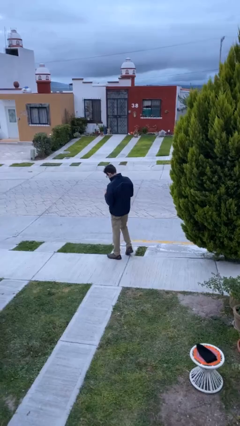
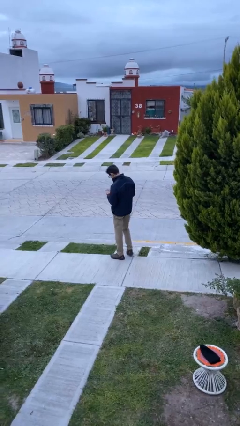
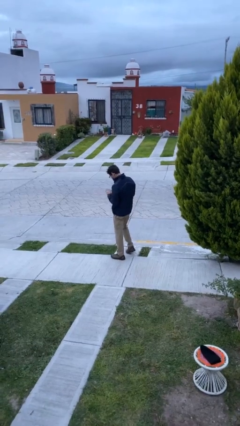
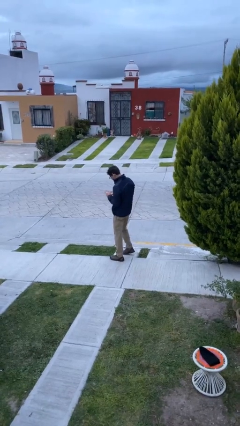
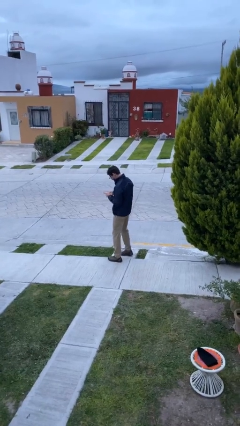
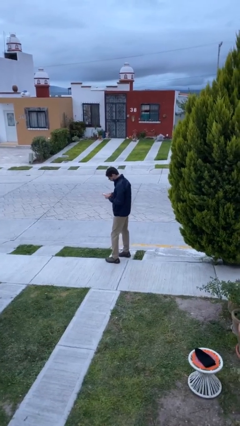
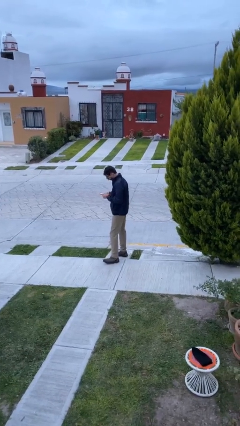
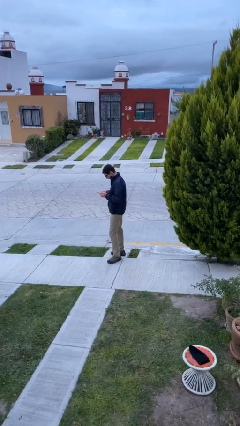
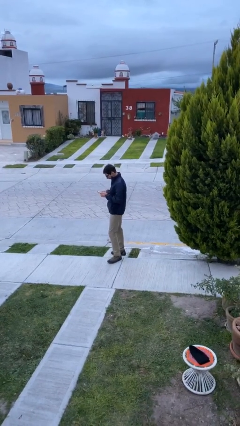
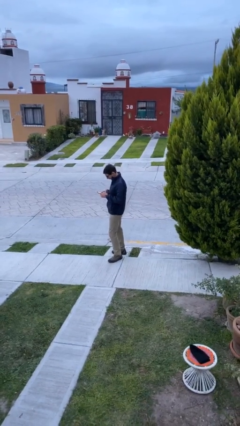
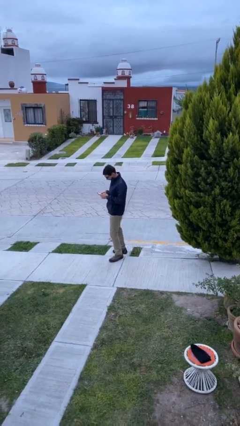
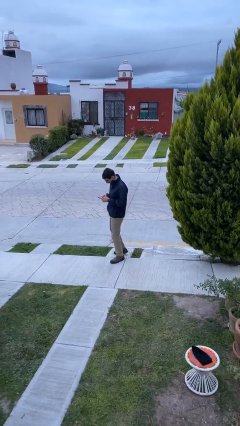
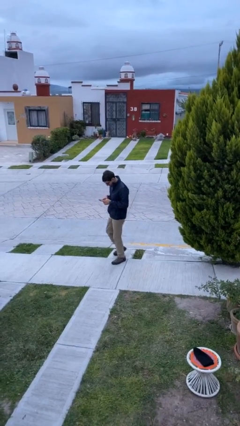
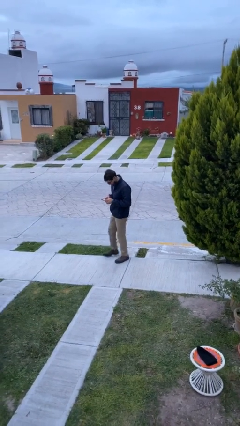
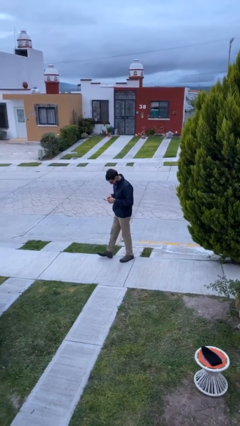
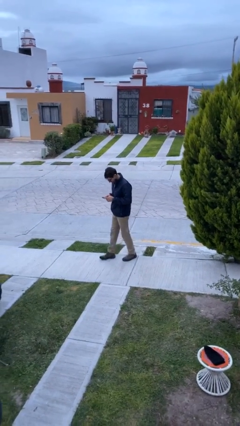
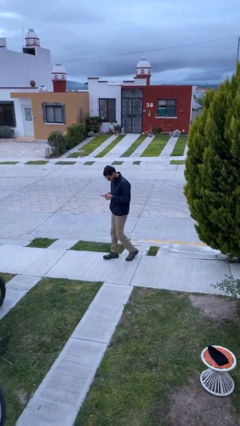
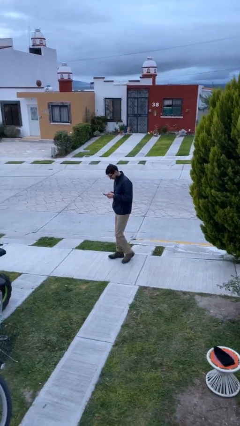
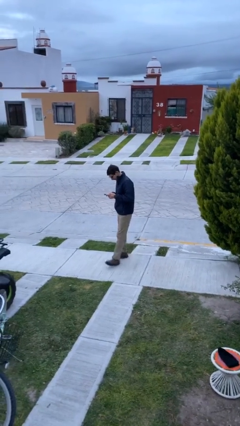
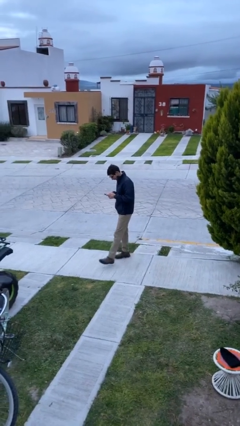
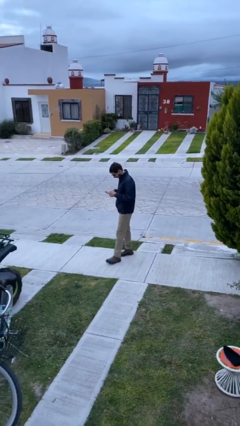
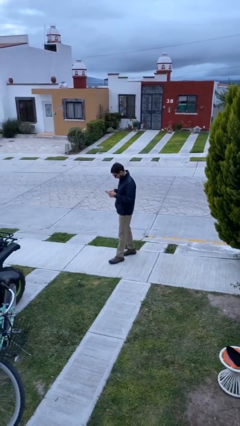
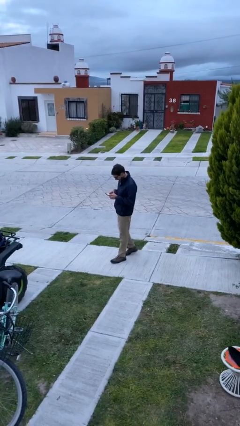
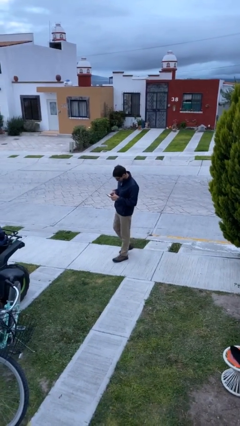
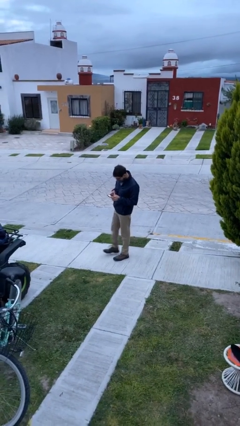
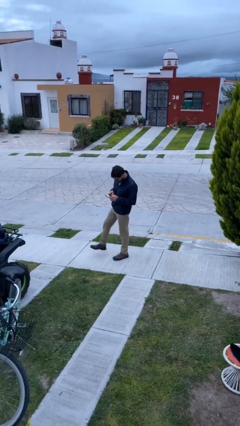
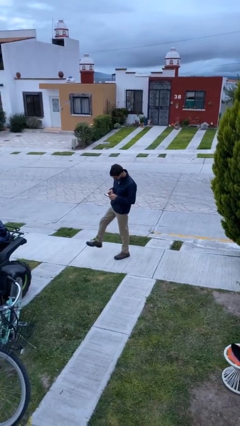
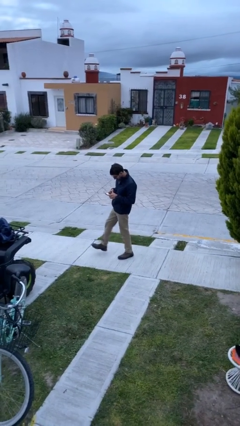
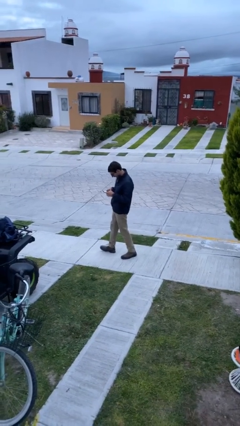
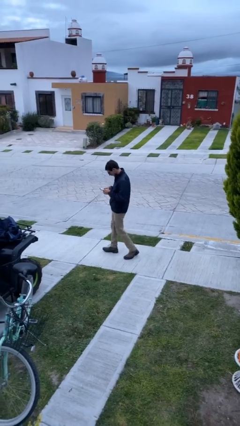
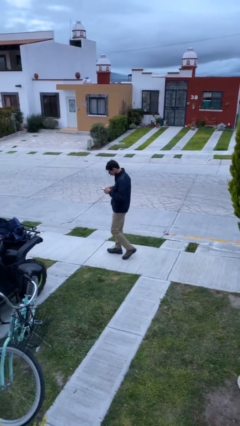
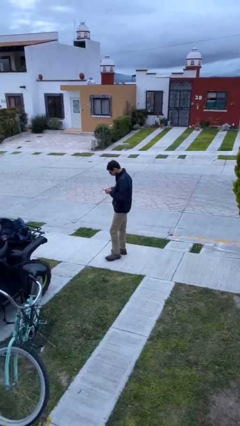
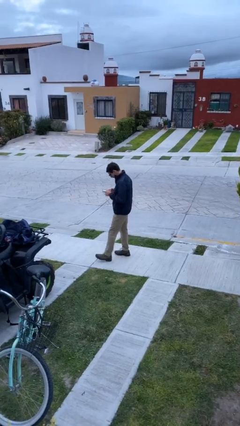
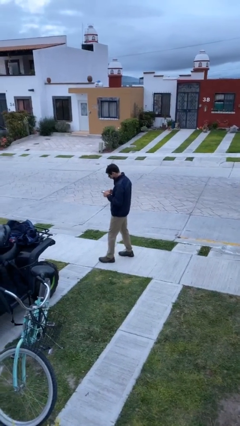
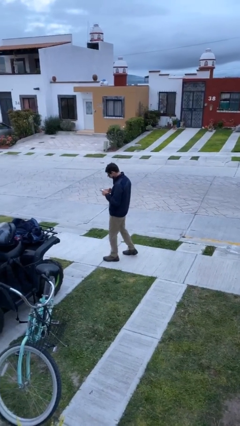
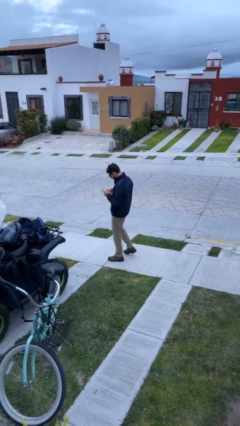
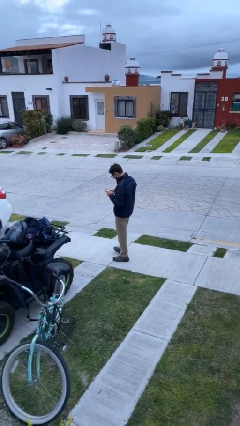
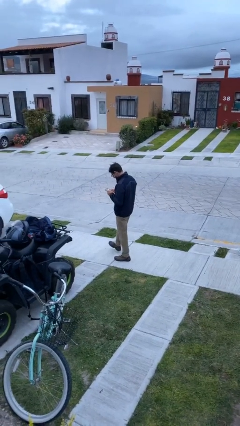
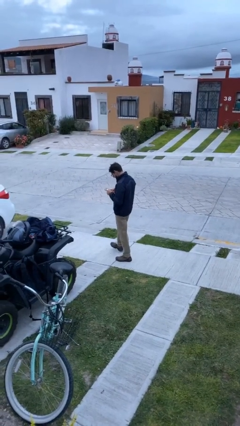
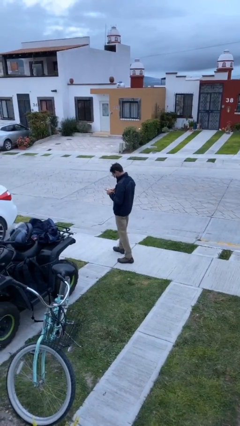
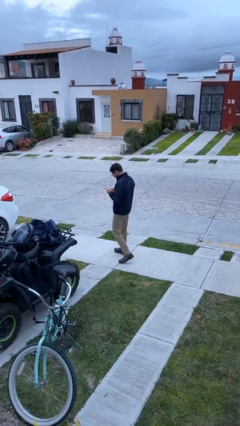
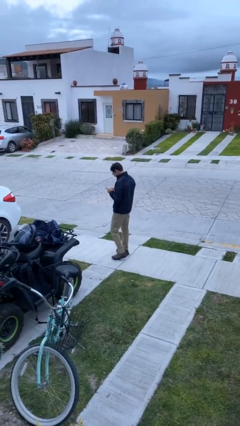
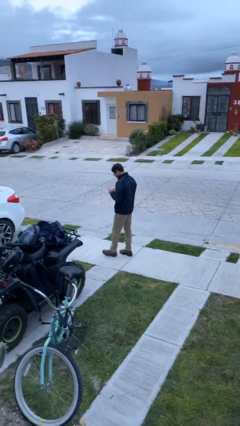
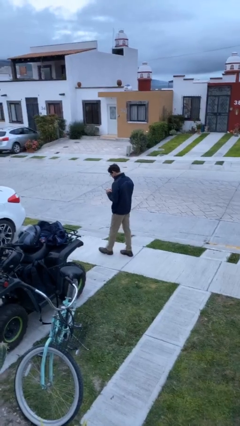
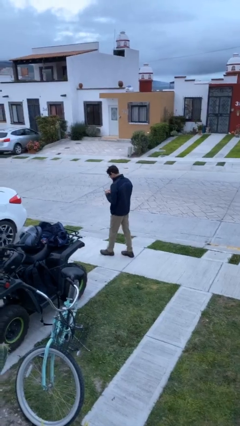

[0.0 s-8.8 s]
person texts on phone

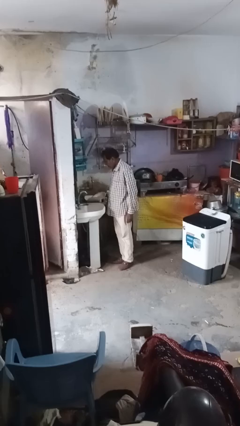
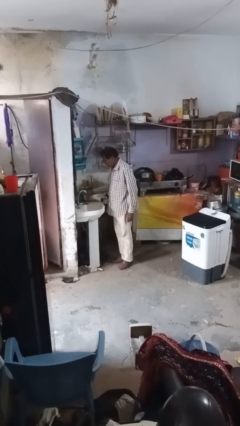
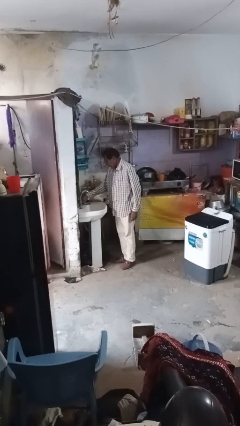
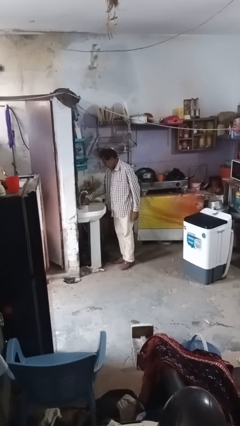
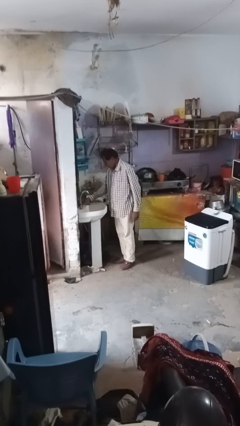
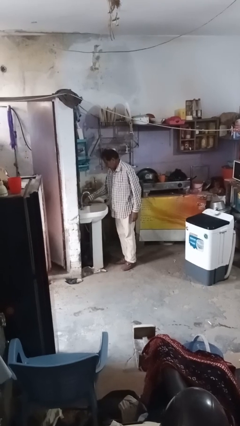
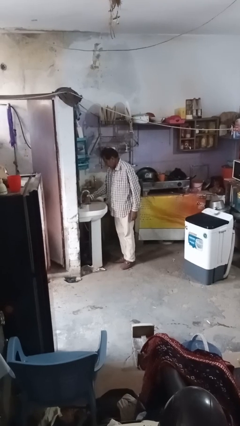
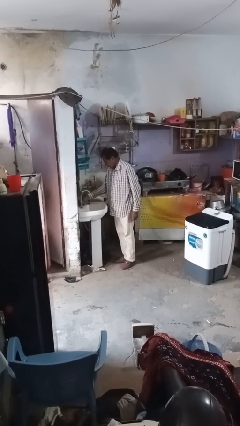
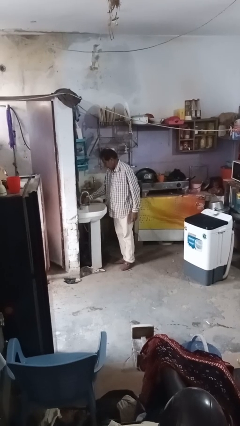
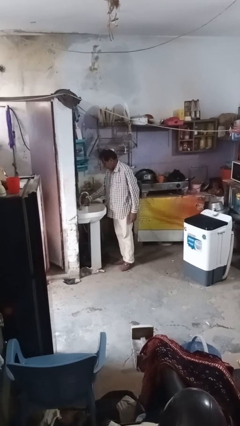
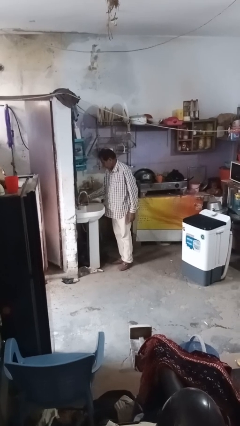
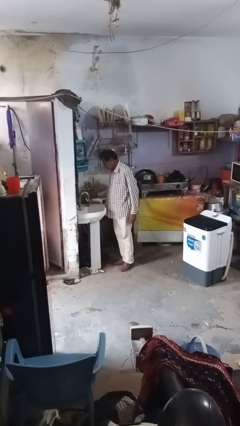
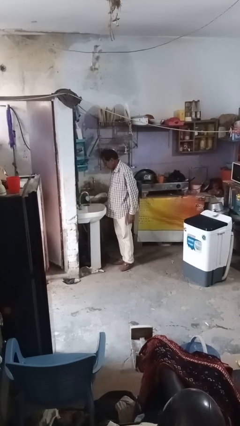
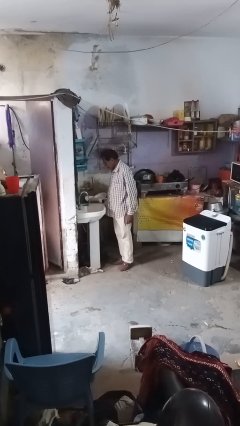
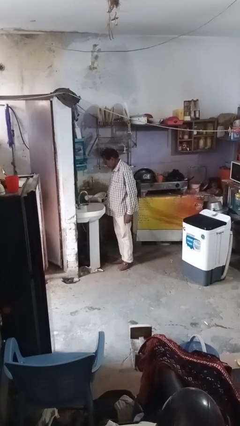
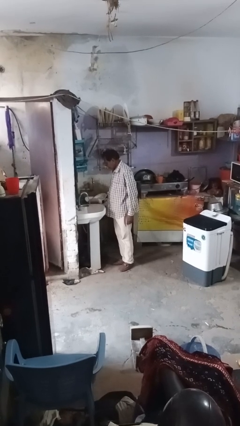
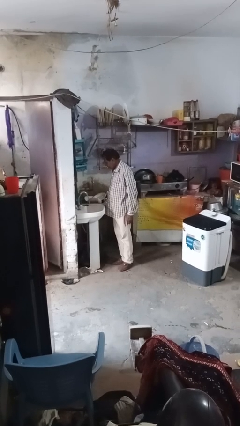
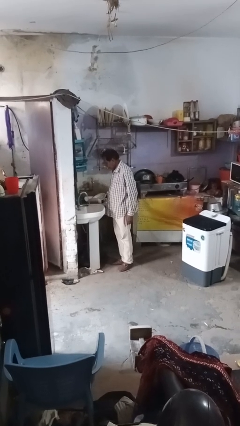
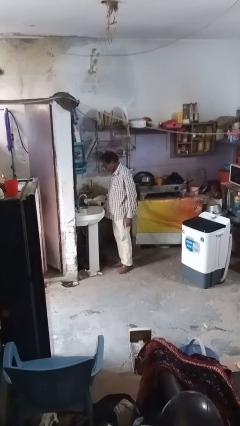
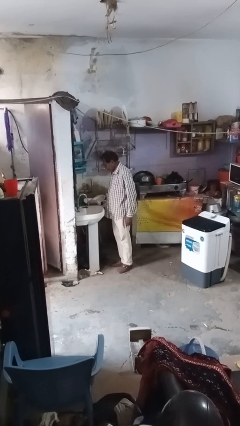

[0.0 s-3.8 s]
person turns on faucet

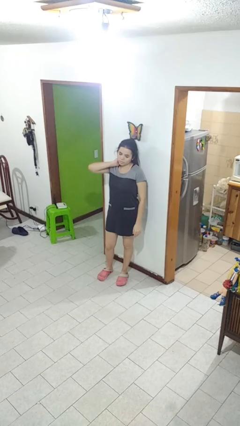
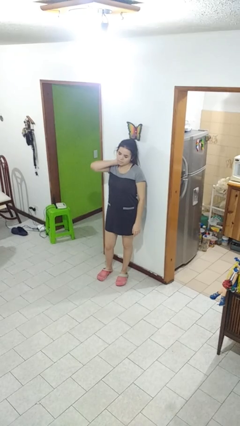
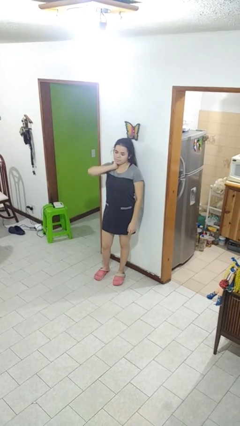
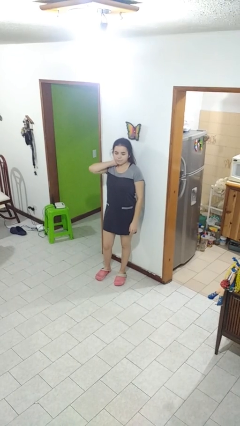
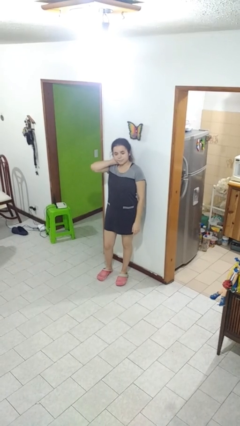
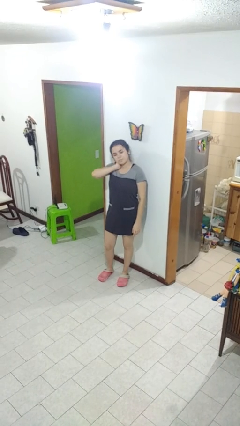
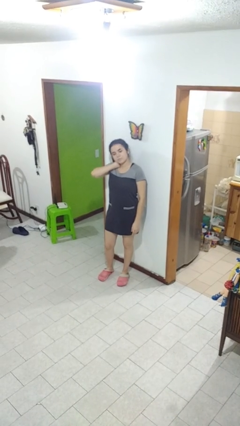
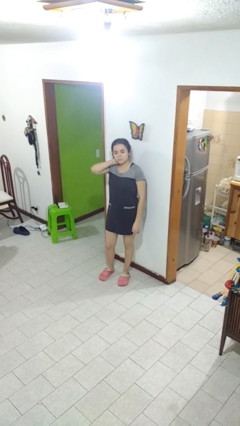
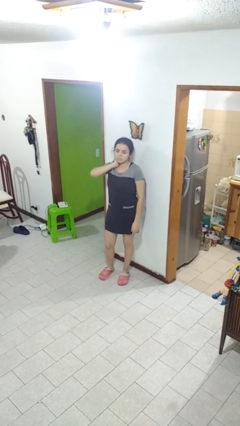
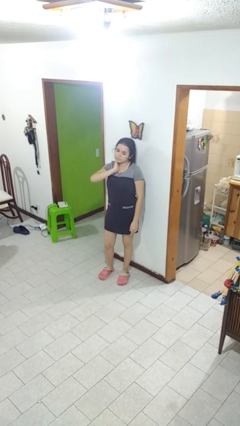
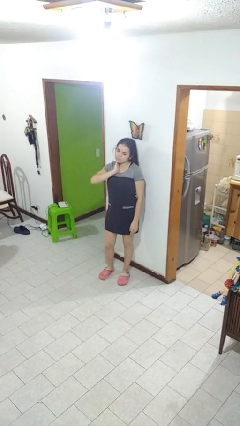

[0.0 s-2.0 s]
person rubs neck

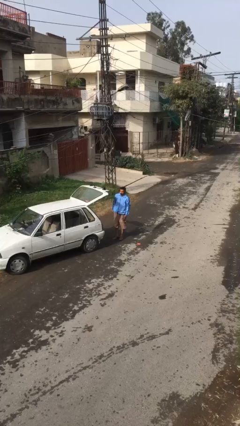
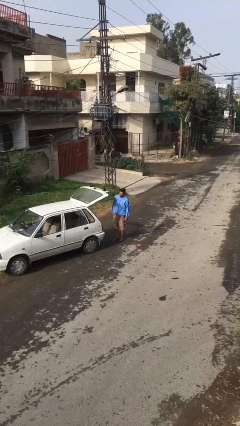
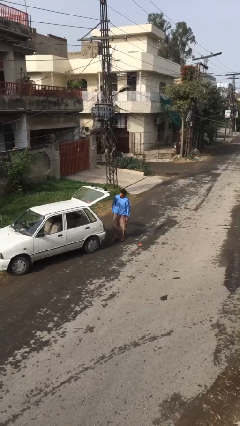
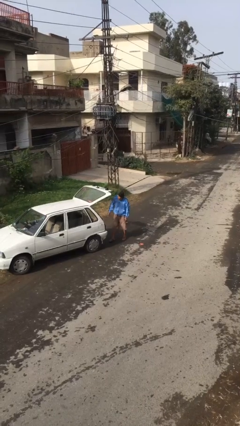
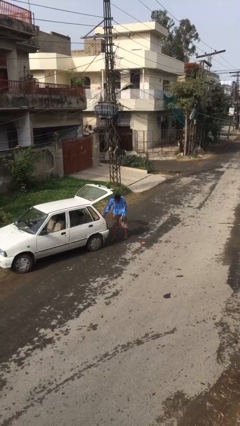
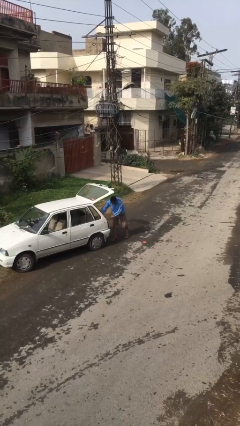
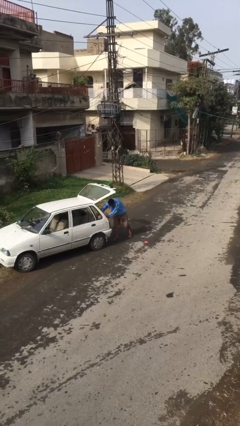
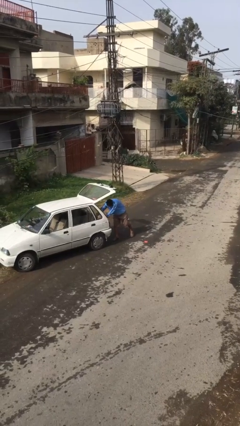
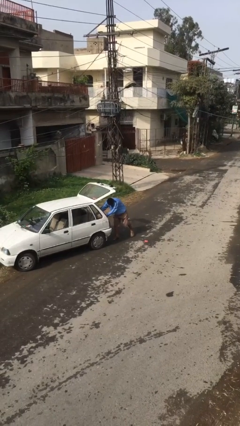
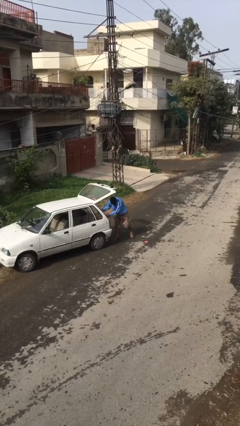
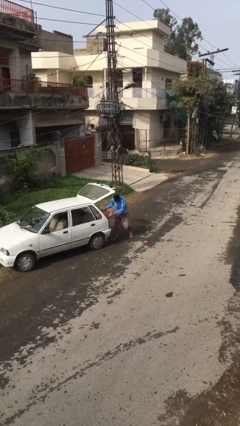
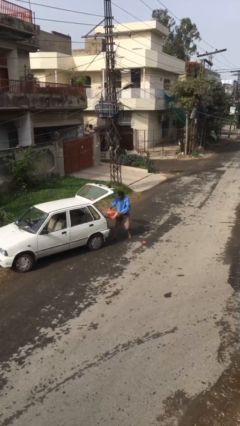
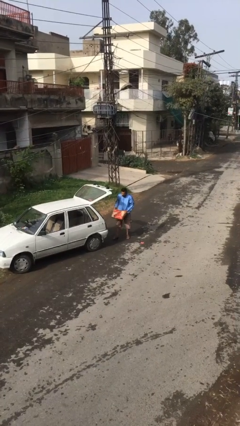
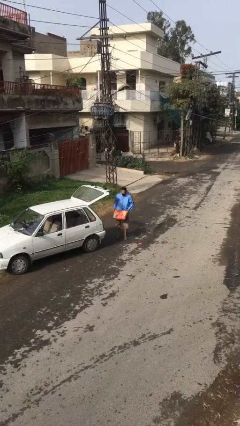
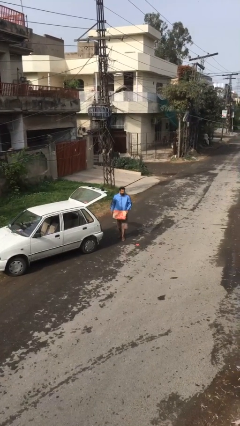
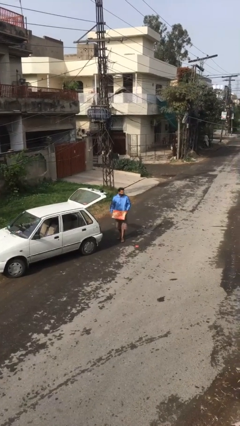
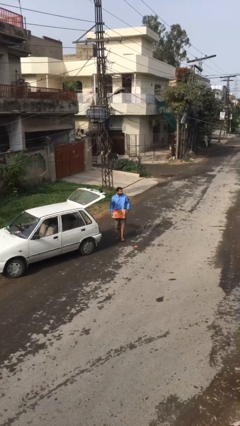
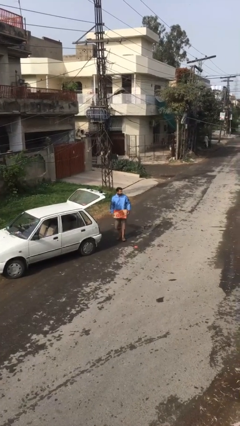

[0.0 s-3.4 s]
person unloads car
